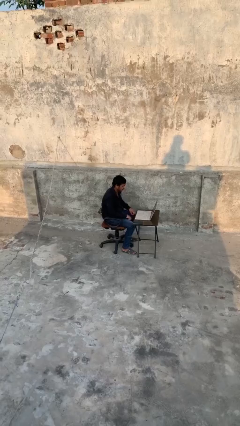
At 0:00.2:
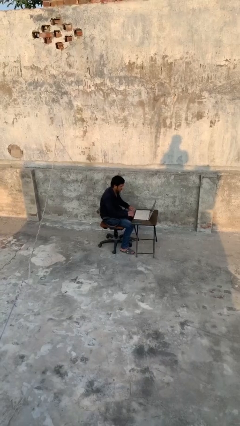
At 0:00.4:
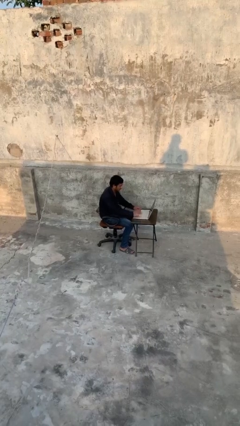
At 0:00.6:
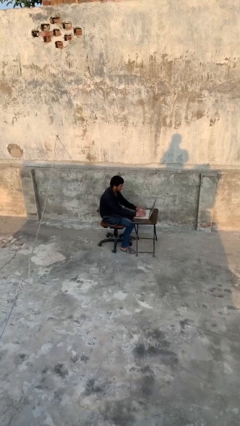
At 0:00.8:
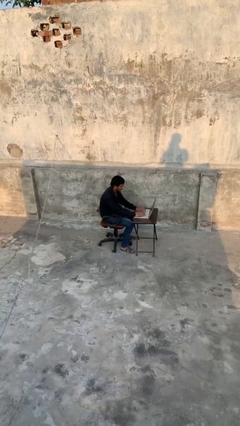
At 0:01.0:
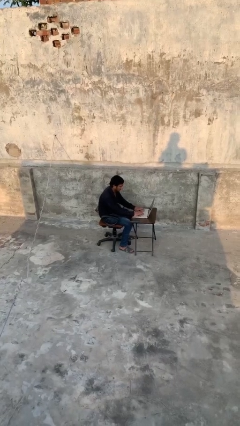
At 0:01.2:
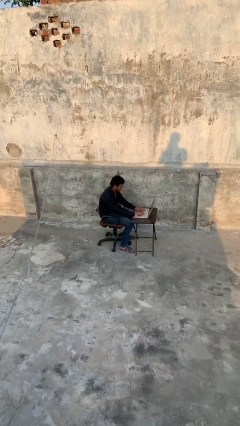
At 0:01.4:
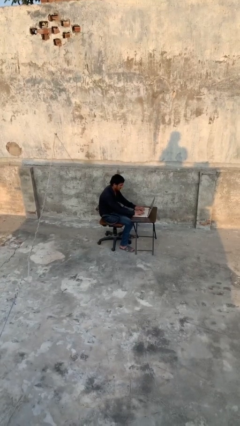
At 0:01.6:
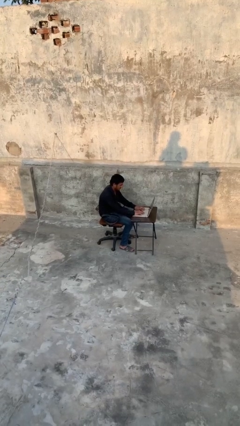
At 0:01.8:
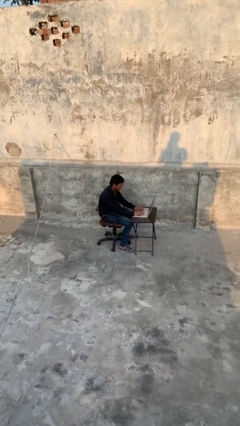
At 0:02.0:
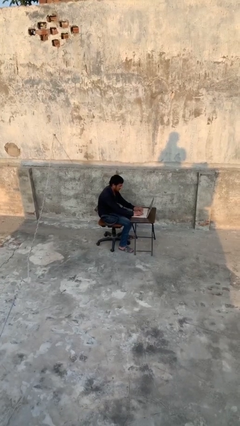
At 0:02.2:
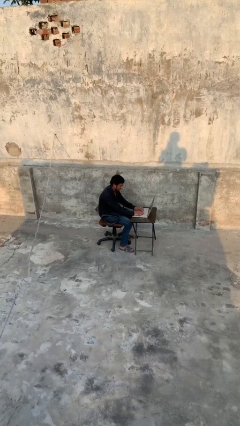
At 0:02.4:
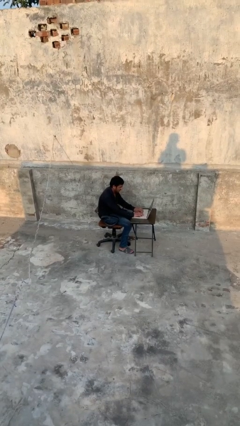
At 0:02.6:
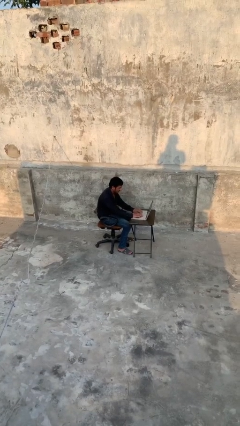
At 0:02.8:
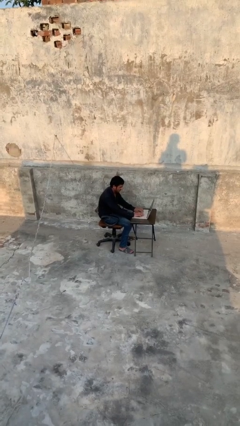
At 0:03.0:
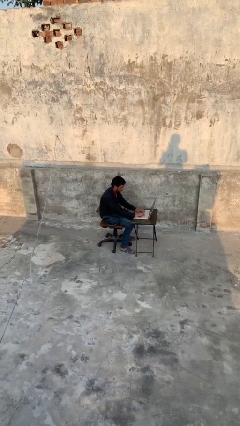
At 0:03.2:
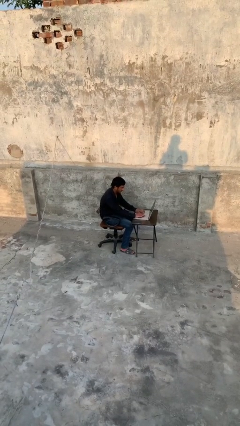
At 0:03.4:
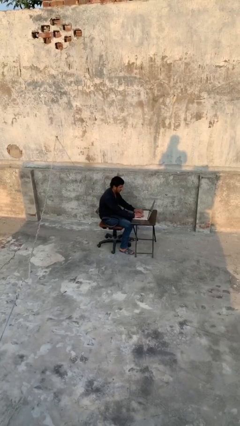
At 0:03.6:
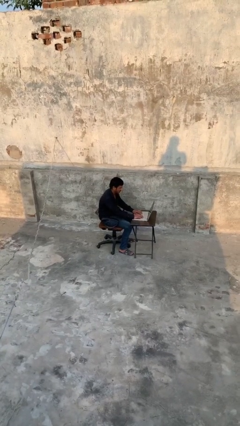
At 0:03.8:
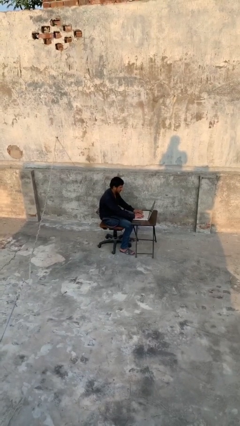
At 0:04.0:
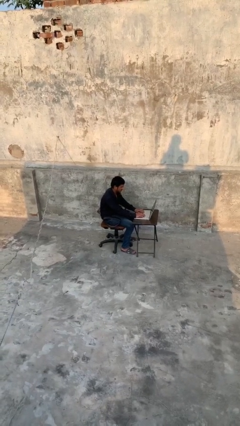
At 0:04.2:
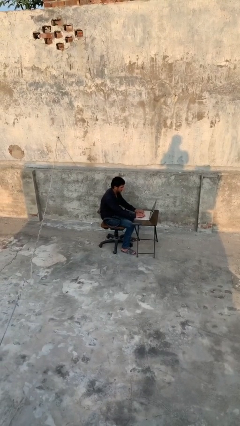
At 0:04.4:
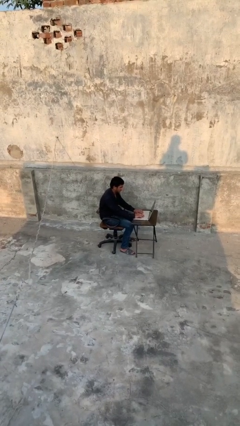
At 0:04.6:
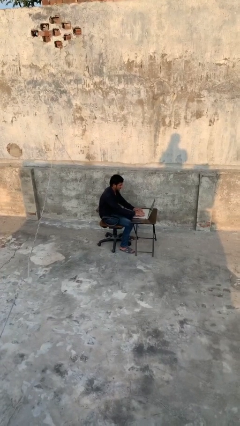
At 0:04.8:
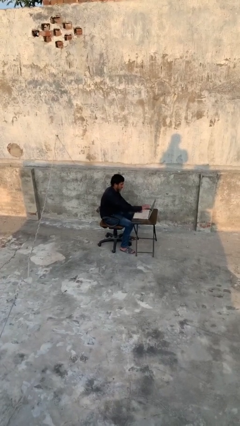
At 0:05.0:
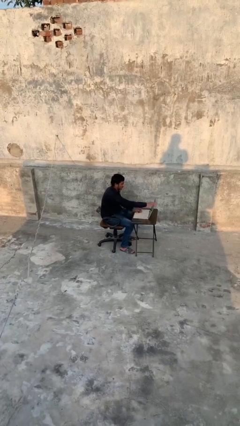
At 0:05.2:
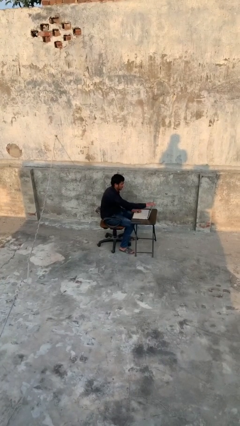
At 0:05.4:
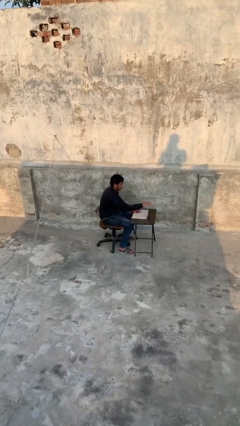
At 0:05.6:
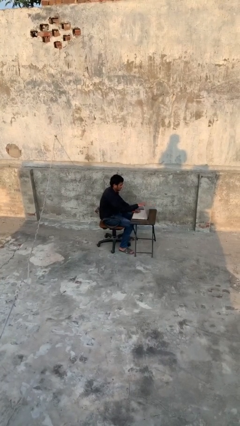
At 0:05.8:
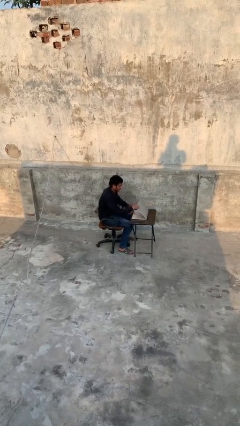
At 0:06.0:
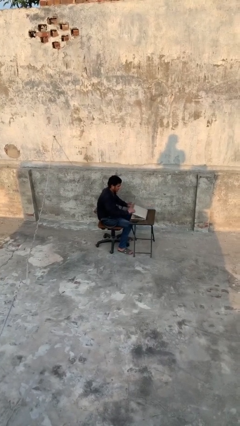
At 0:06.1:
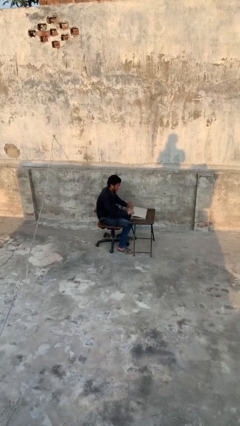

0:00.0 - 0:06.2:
person interacts with laptop

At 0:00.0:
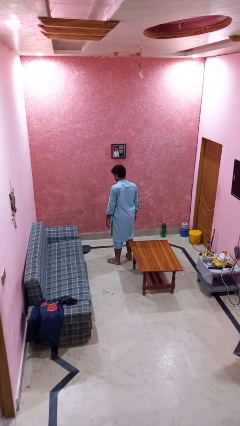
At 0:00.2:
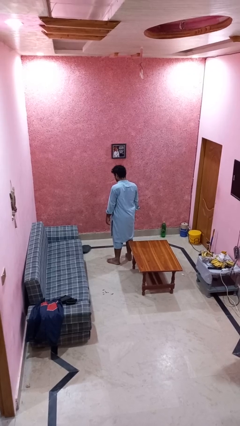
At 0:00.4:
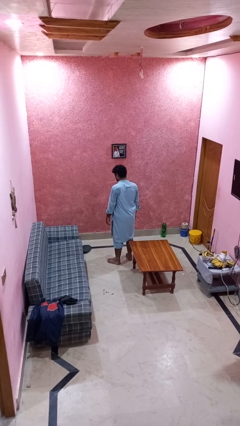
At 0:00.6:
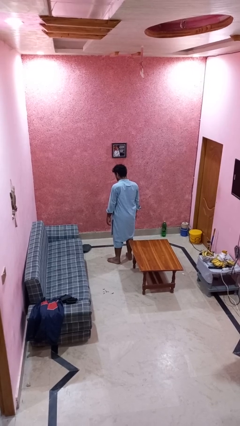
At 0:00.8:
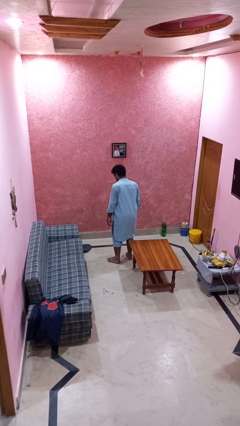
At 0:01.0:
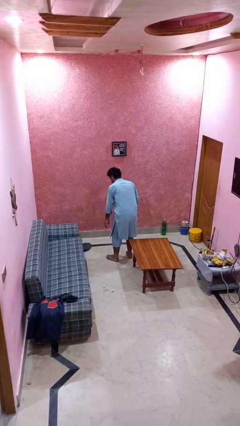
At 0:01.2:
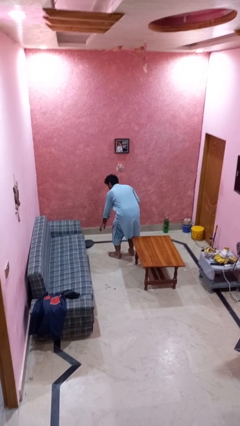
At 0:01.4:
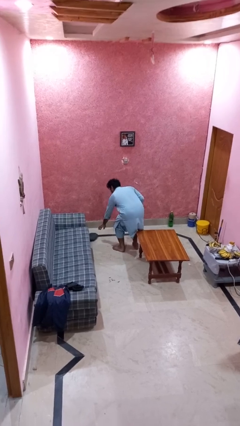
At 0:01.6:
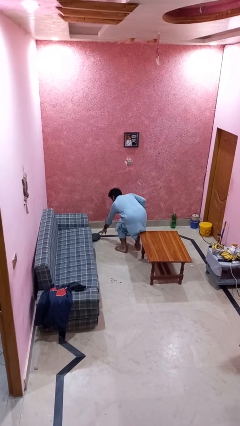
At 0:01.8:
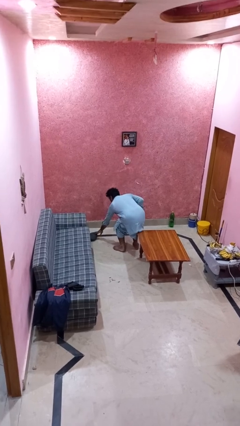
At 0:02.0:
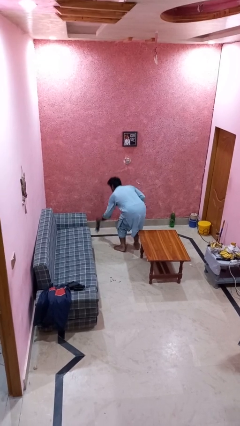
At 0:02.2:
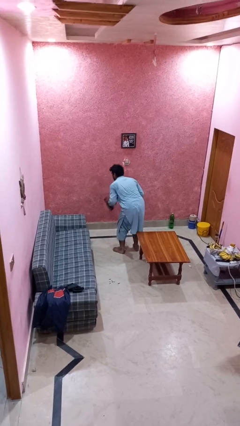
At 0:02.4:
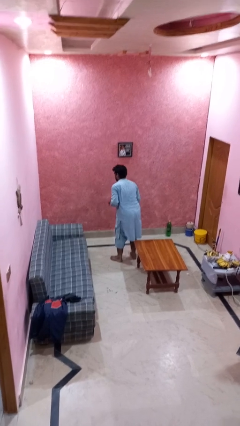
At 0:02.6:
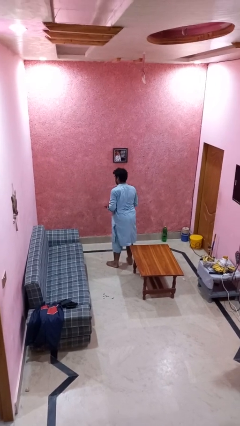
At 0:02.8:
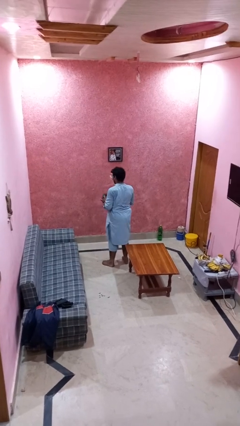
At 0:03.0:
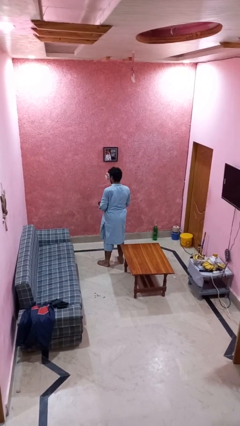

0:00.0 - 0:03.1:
person picks up object from floor

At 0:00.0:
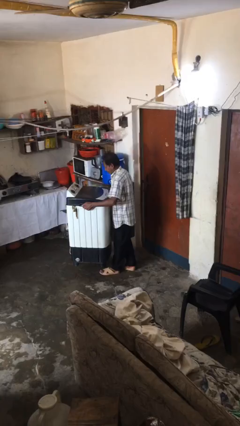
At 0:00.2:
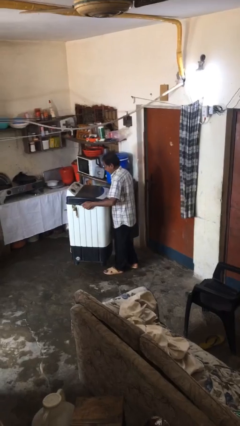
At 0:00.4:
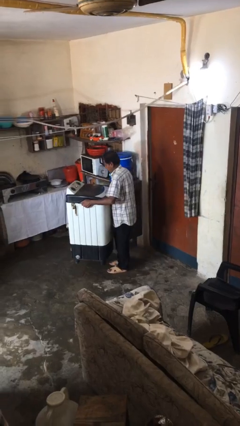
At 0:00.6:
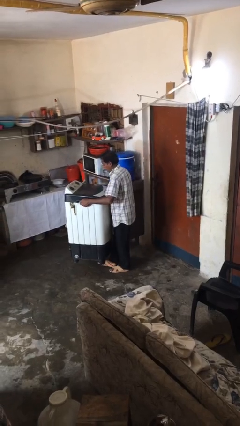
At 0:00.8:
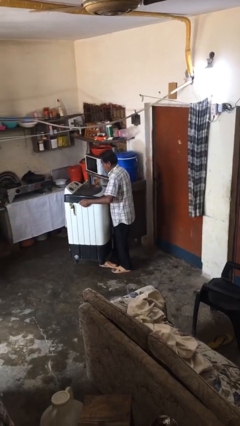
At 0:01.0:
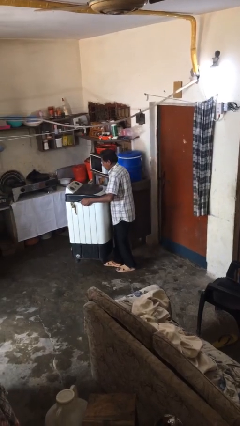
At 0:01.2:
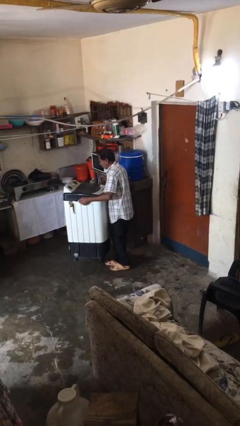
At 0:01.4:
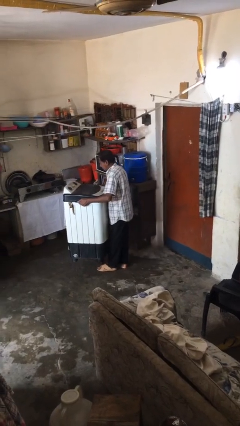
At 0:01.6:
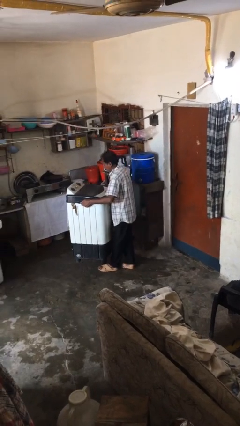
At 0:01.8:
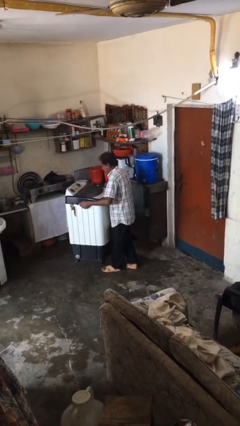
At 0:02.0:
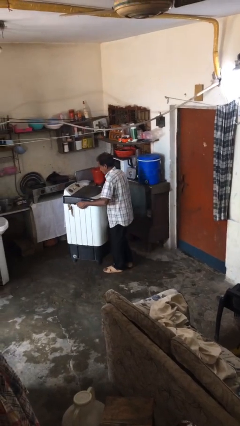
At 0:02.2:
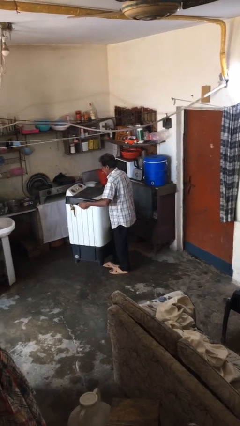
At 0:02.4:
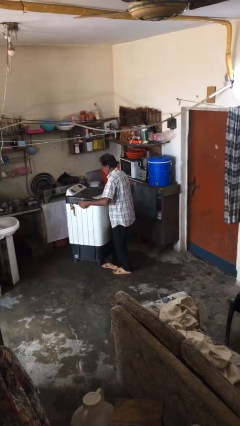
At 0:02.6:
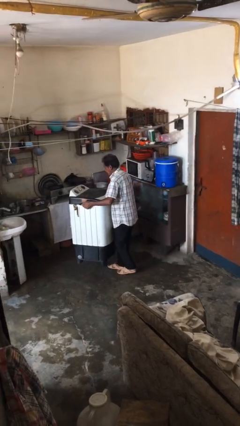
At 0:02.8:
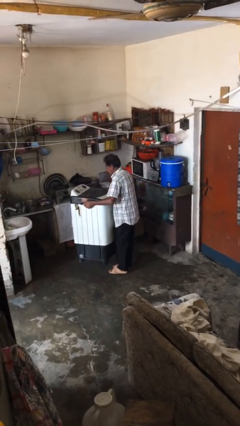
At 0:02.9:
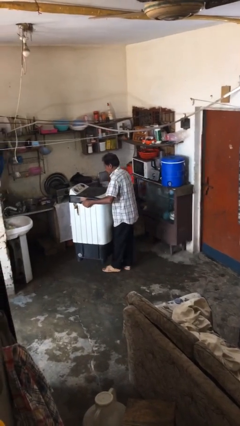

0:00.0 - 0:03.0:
person carries heavy object

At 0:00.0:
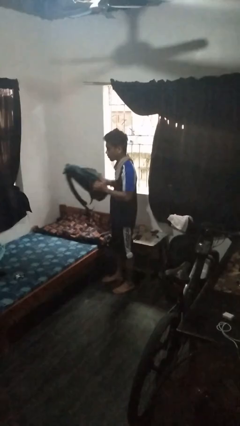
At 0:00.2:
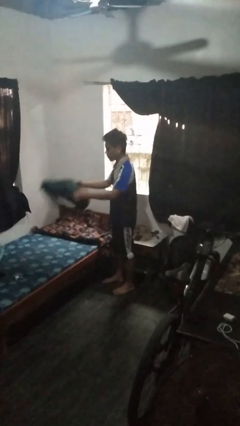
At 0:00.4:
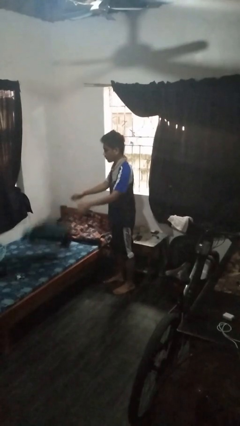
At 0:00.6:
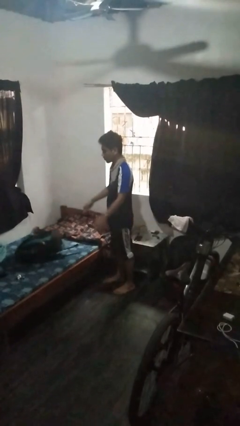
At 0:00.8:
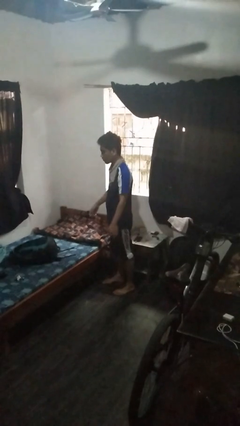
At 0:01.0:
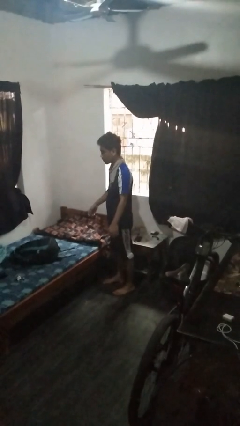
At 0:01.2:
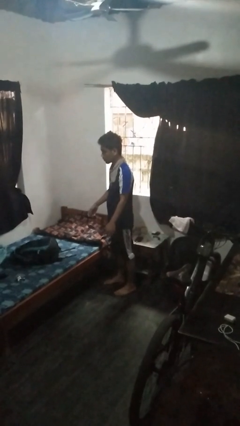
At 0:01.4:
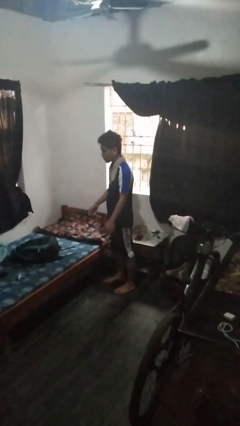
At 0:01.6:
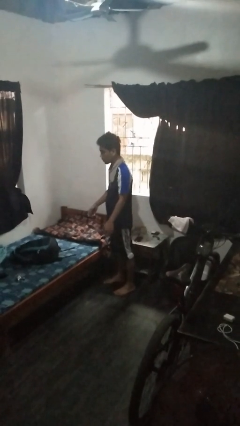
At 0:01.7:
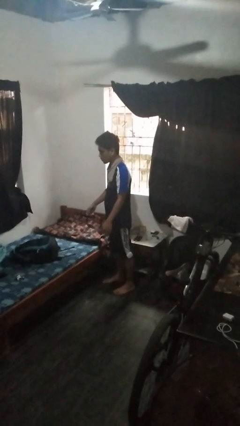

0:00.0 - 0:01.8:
person throws object on bed

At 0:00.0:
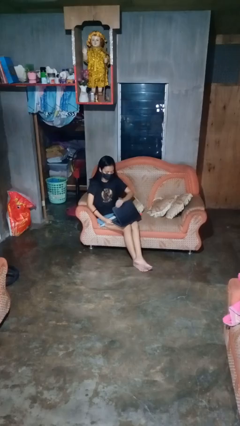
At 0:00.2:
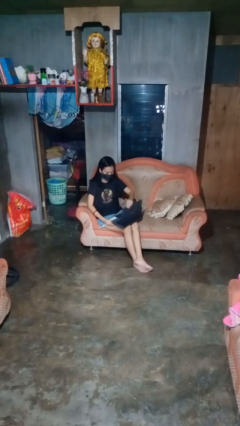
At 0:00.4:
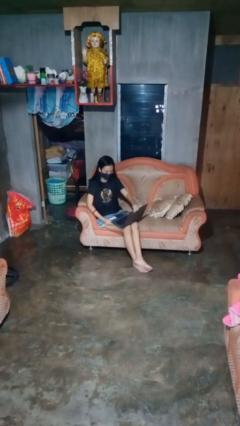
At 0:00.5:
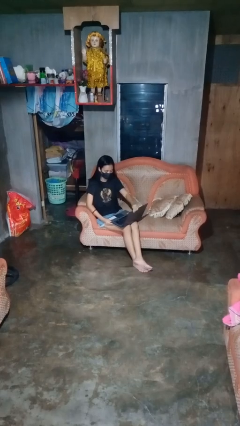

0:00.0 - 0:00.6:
person opens laptop

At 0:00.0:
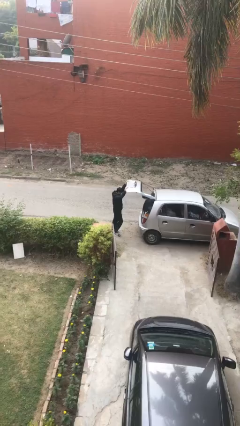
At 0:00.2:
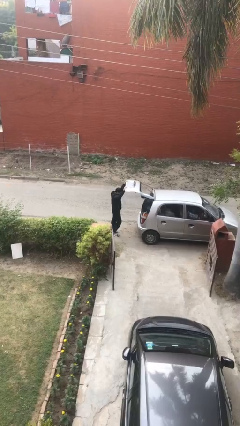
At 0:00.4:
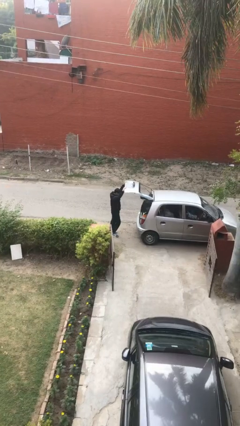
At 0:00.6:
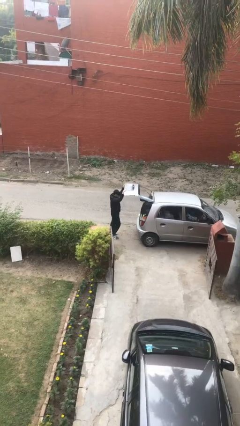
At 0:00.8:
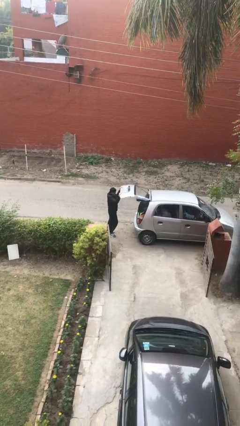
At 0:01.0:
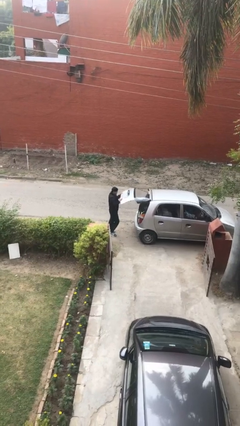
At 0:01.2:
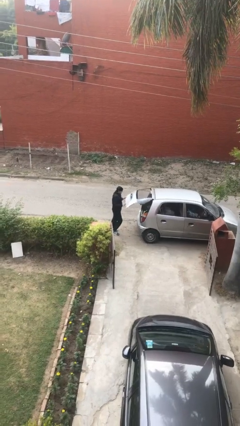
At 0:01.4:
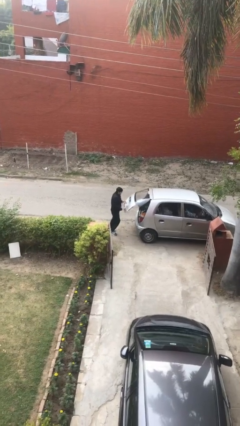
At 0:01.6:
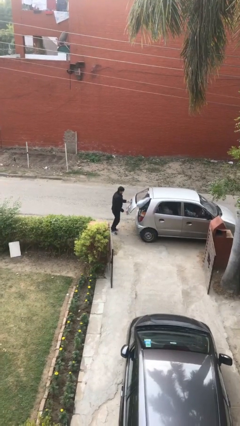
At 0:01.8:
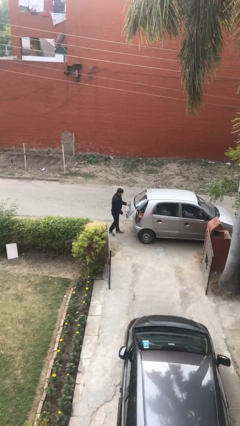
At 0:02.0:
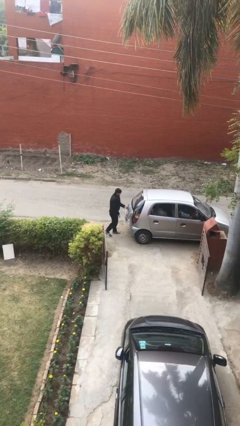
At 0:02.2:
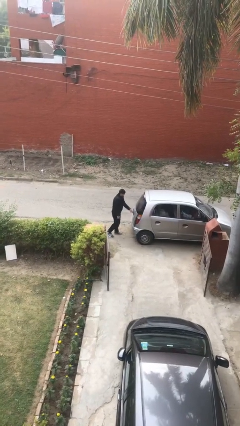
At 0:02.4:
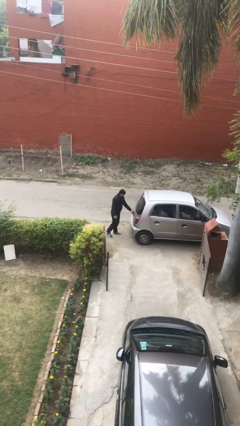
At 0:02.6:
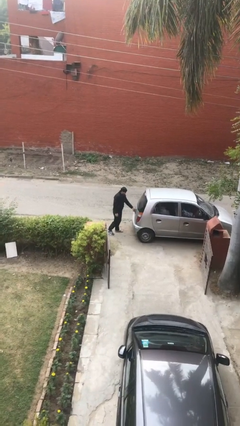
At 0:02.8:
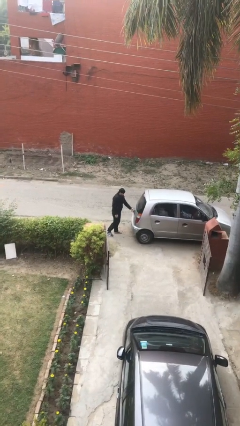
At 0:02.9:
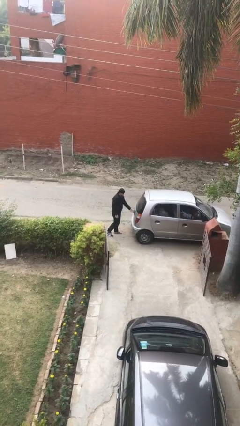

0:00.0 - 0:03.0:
person closes car trunk
